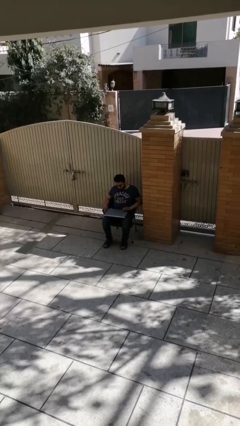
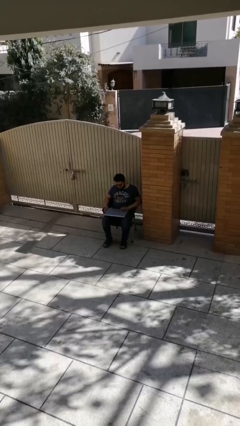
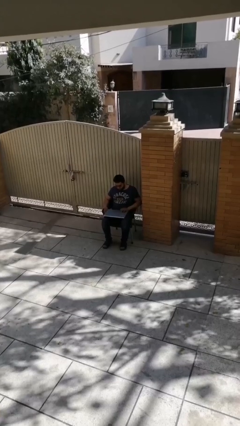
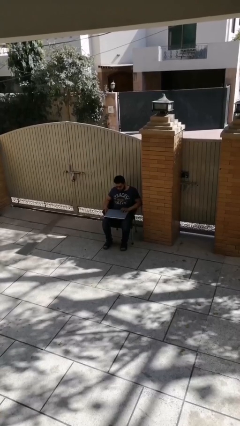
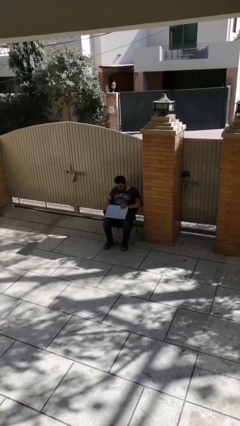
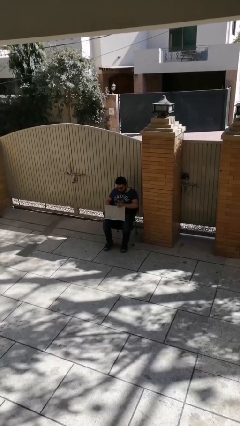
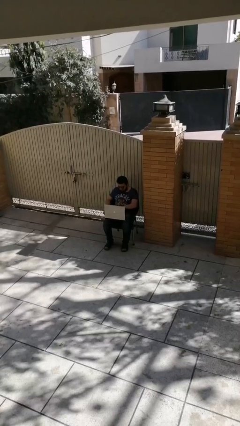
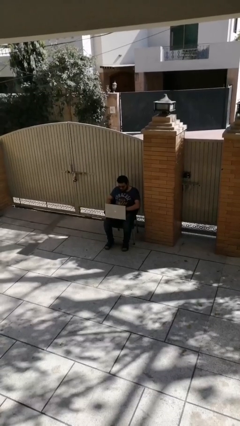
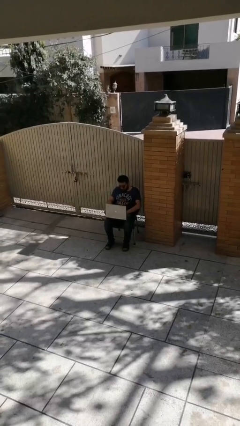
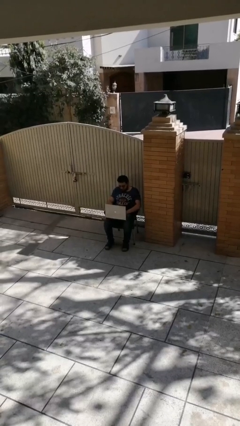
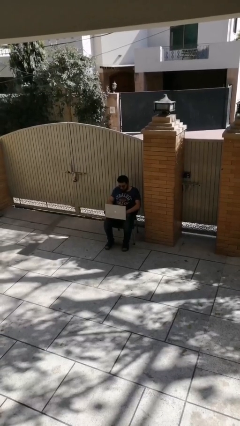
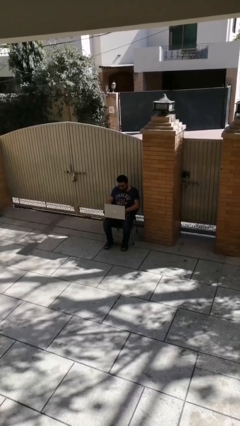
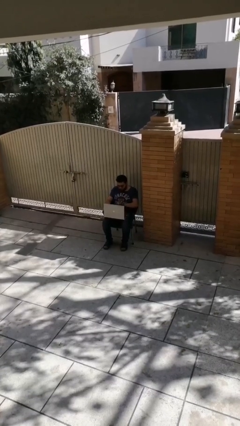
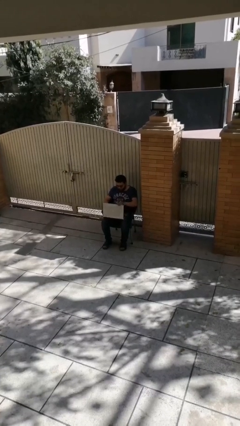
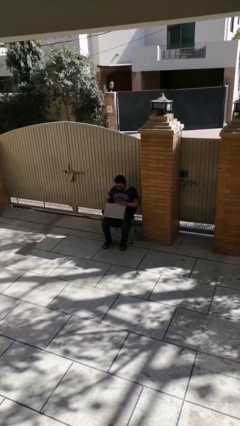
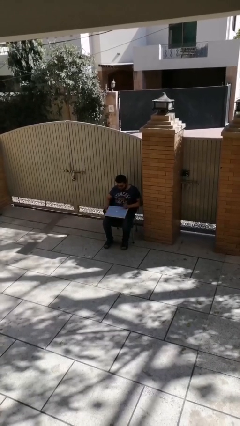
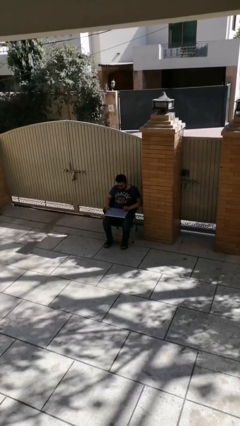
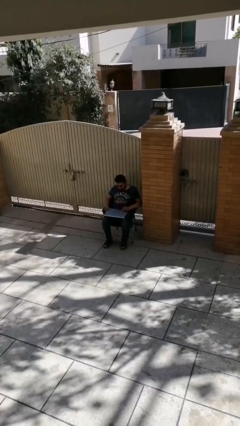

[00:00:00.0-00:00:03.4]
person interacts with laptop

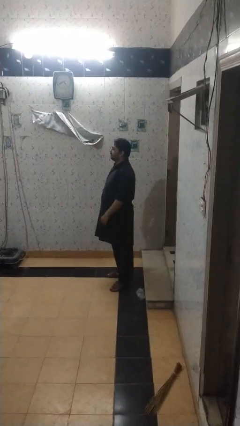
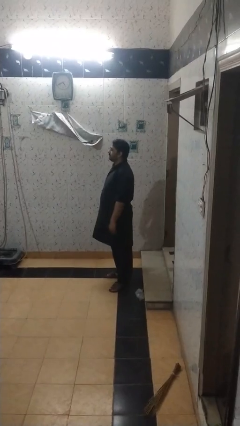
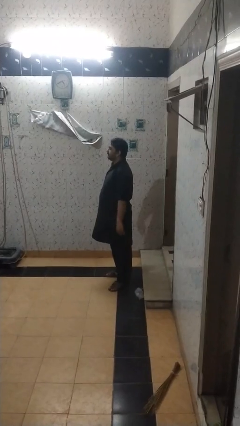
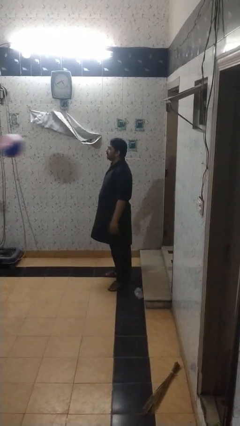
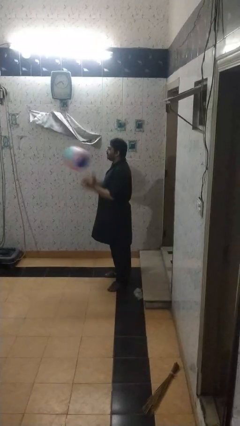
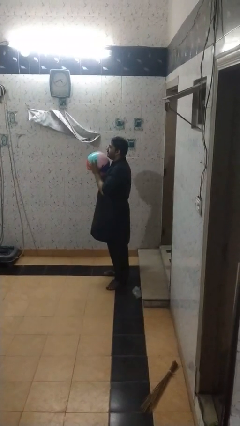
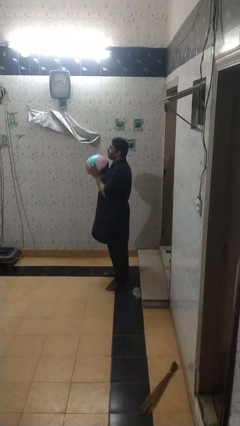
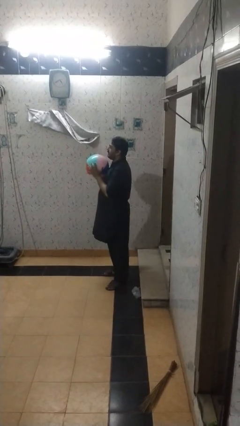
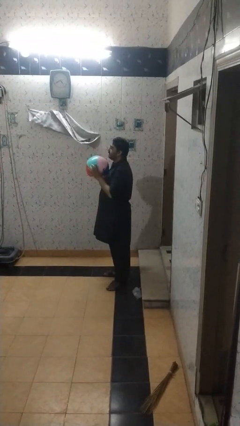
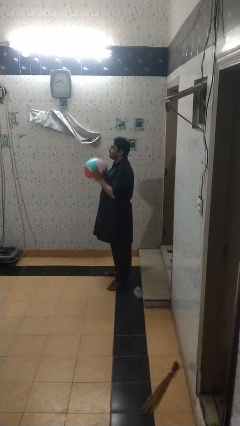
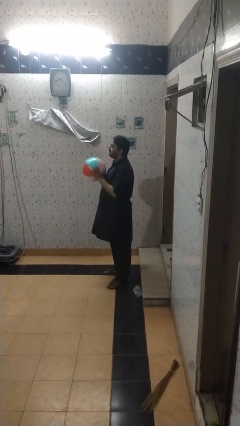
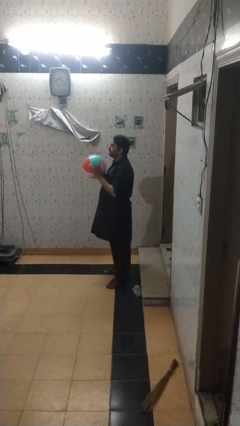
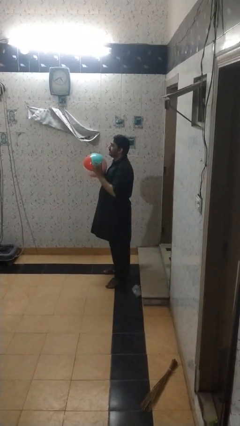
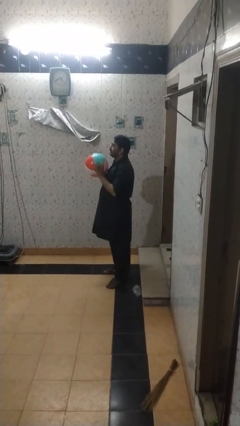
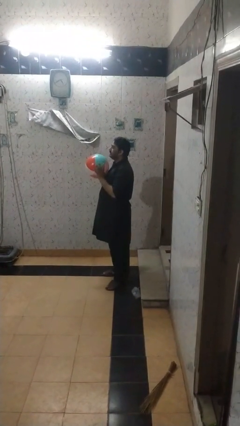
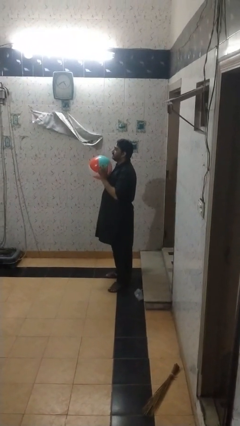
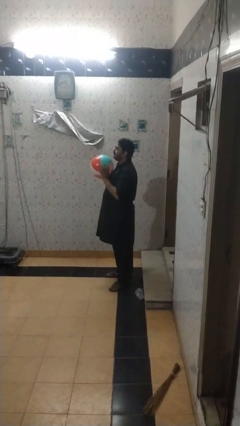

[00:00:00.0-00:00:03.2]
person catches object from person

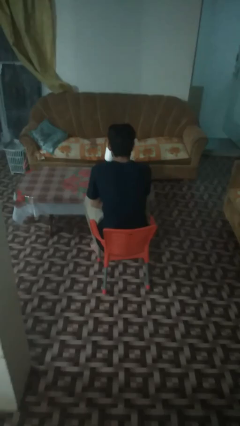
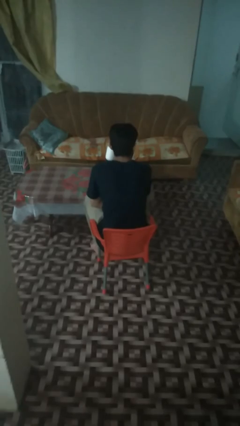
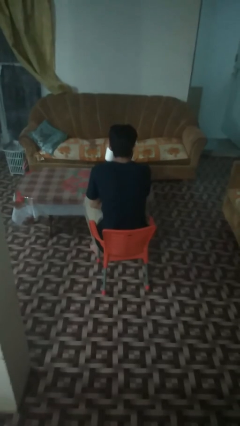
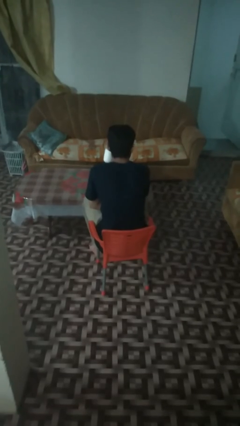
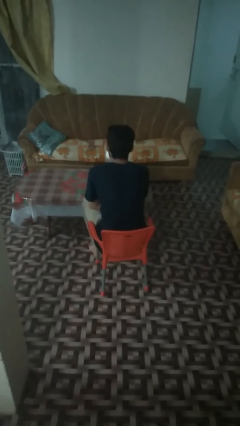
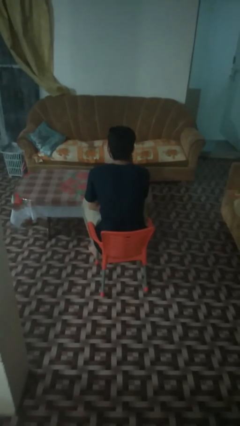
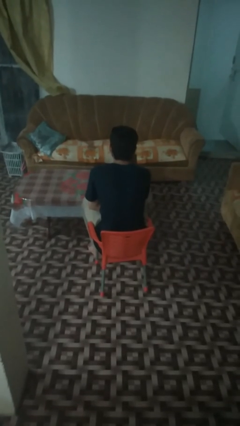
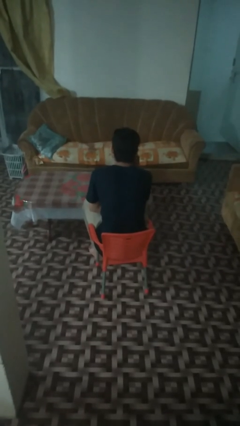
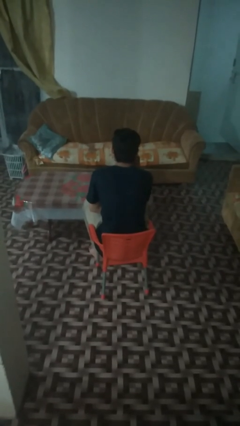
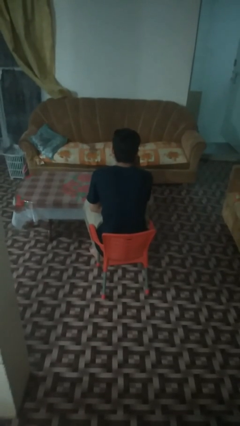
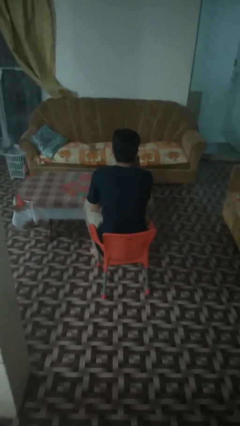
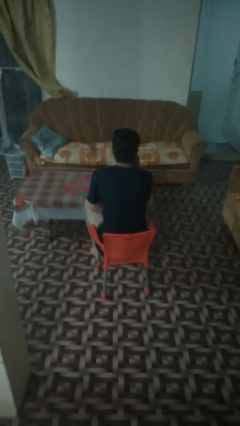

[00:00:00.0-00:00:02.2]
person drinks from mug

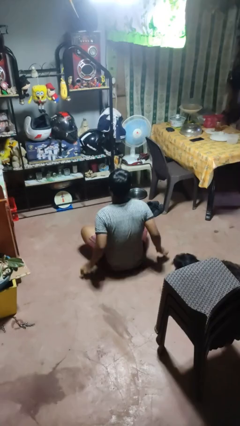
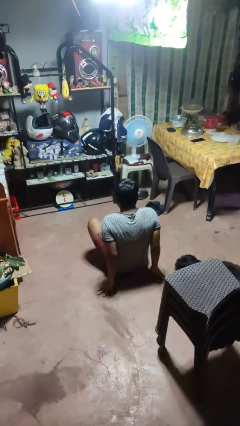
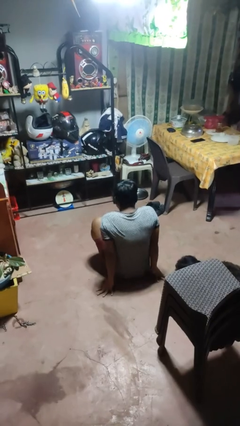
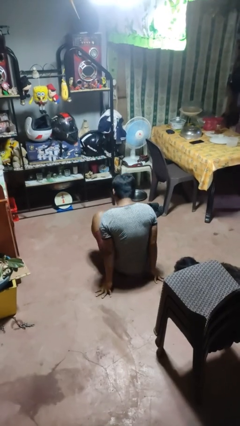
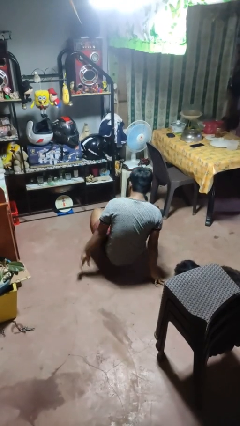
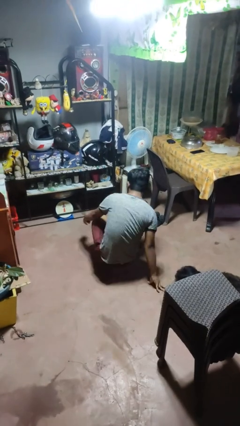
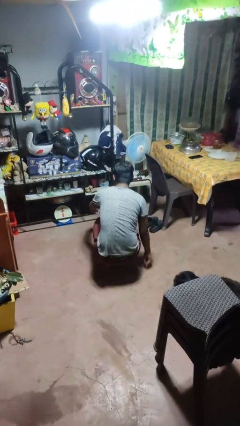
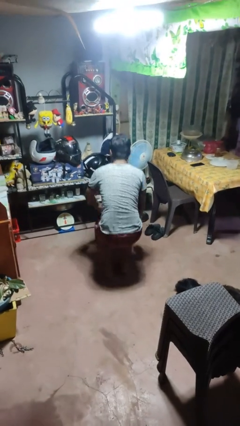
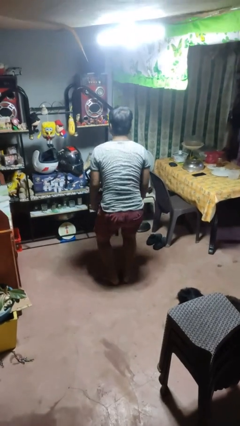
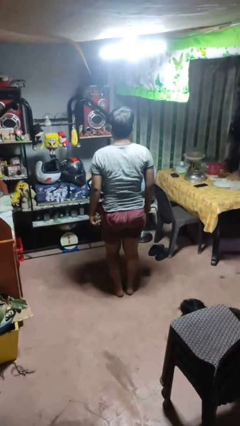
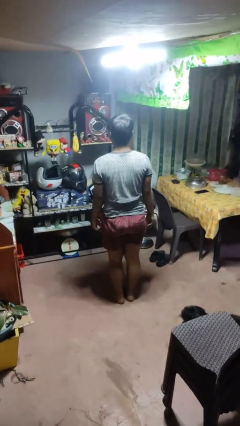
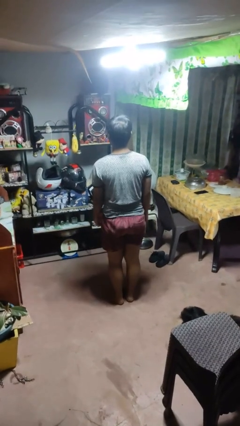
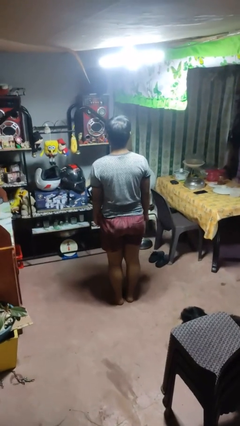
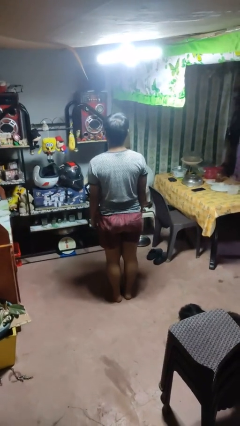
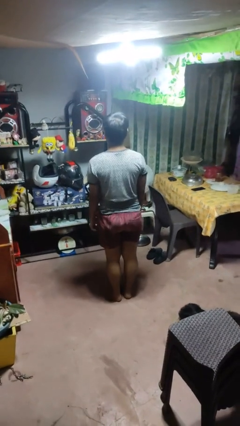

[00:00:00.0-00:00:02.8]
person stands up from floor

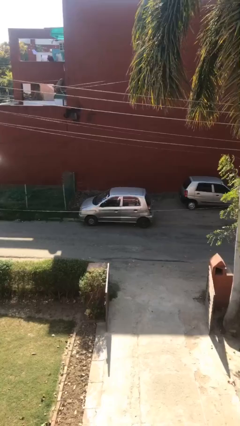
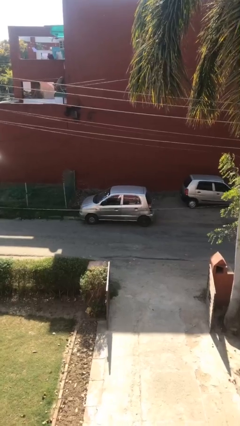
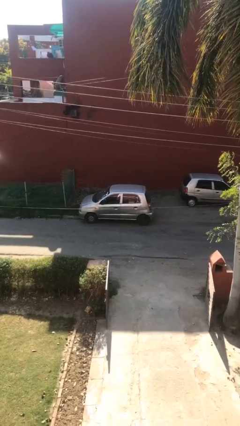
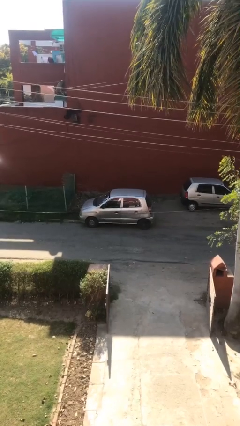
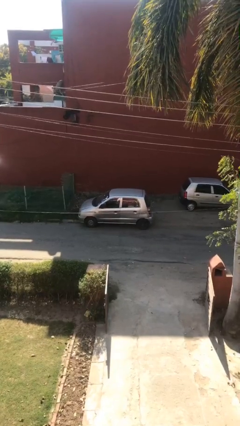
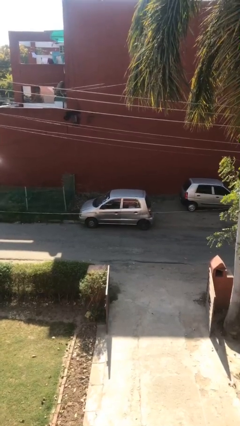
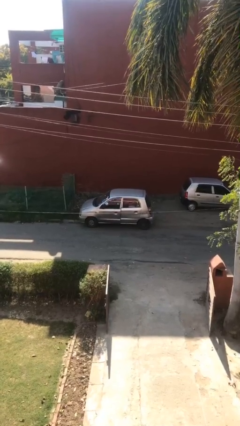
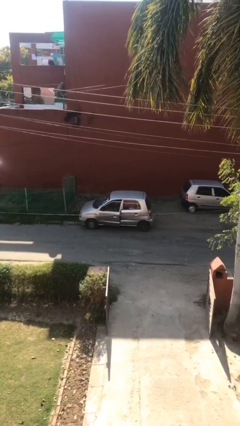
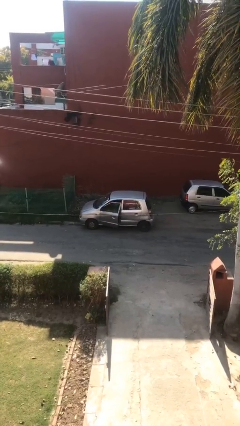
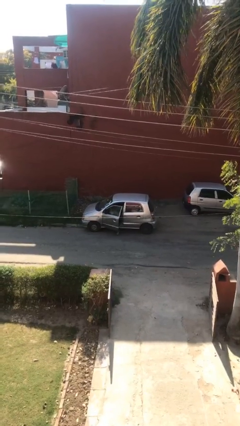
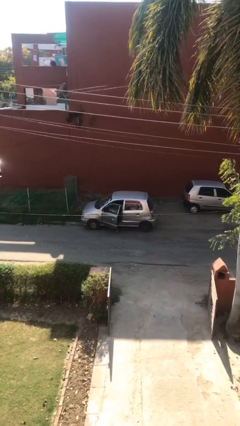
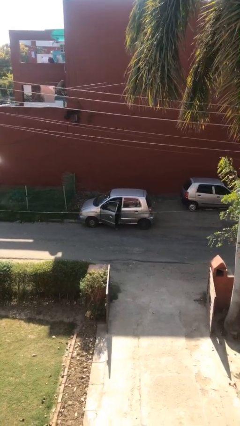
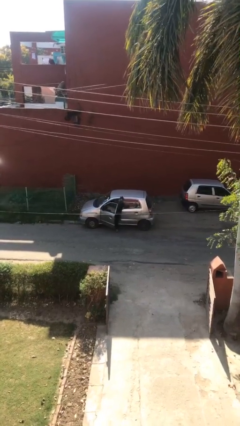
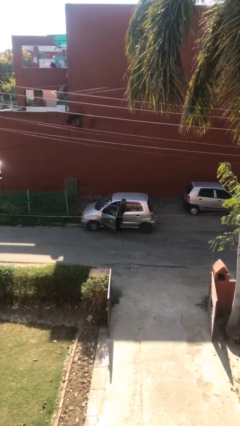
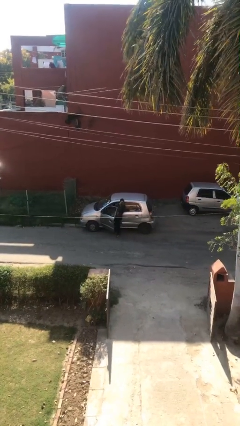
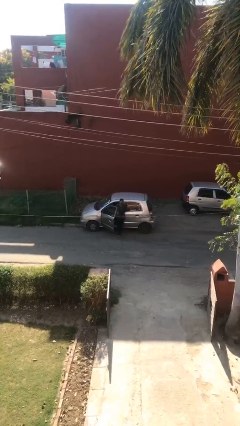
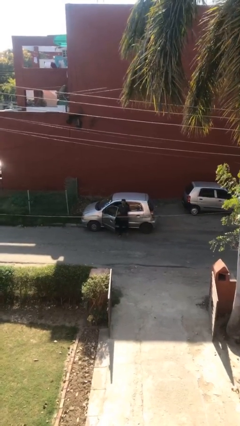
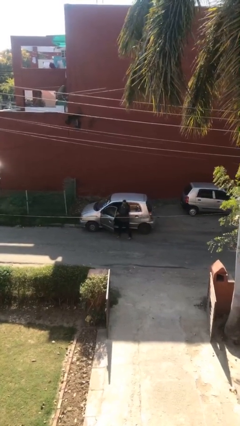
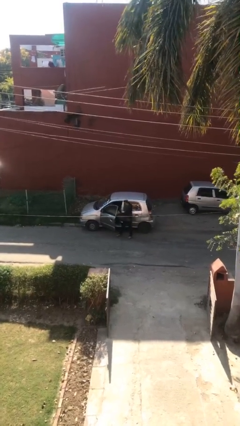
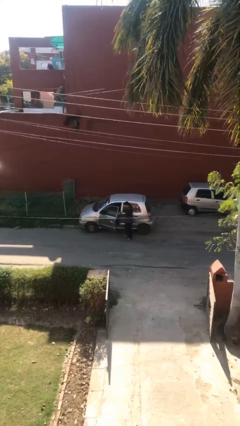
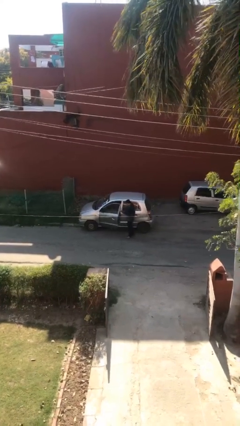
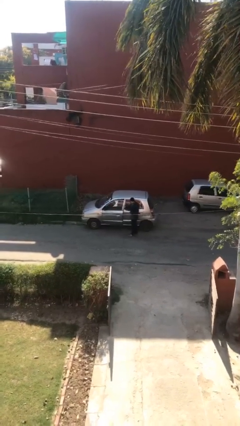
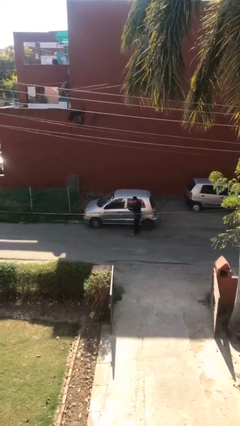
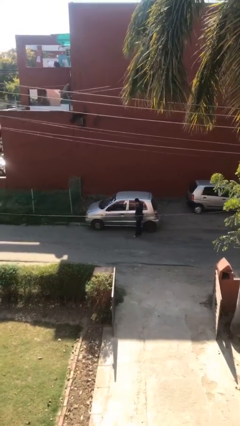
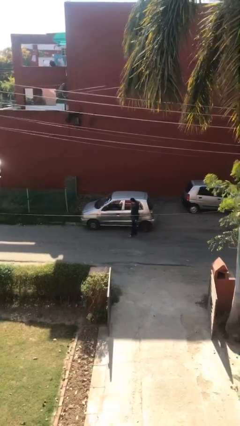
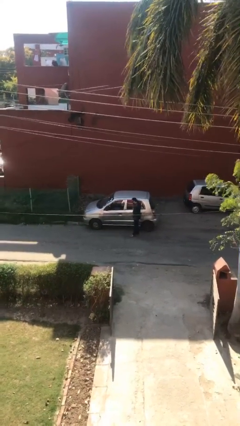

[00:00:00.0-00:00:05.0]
car drops off person

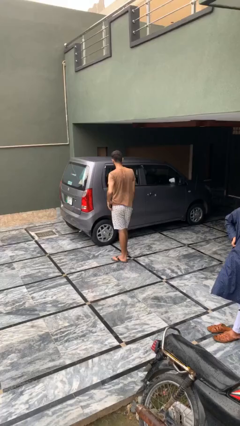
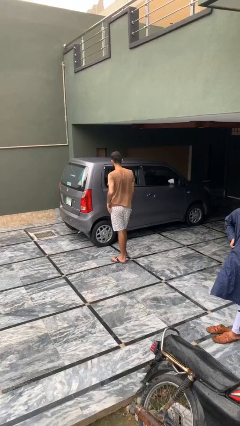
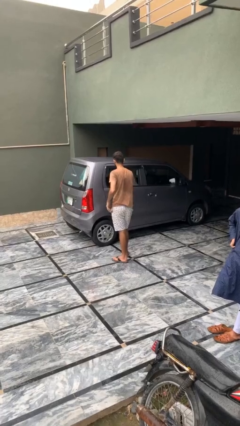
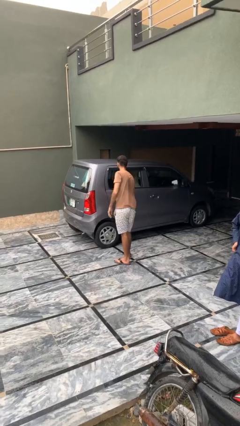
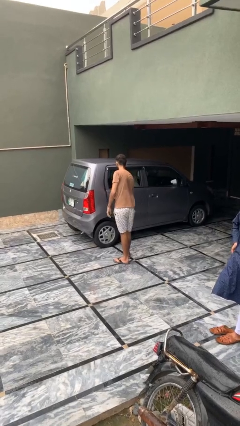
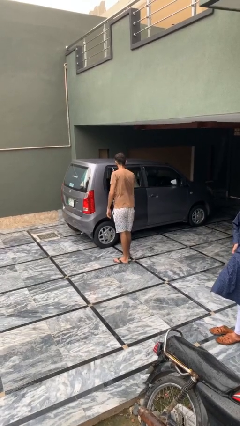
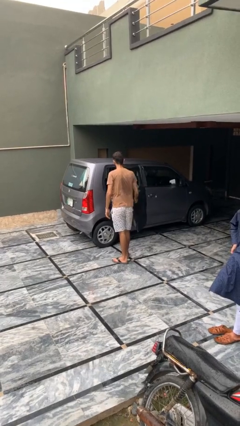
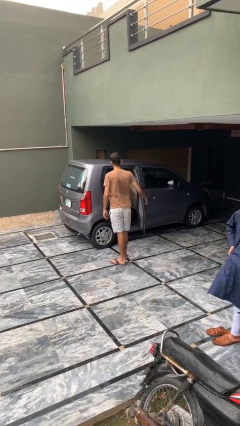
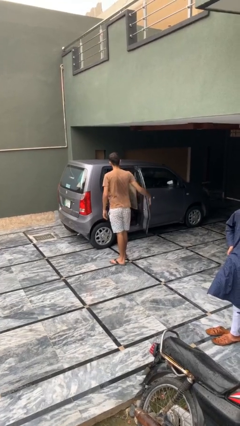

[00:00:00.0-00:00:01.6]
person opens car door
